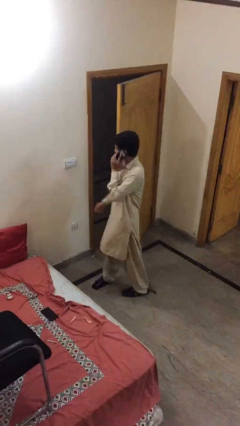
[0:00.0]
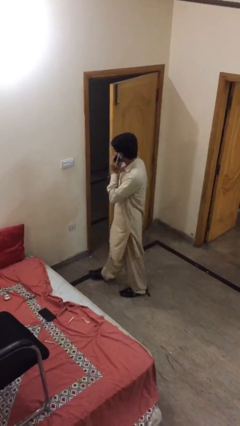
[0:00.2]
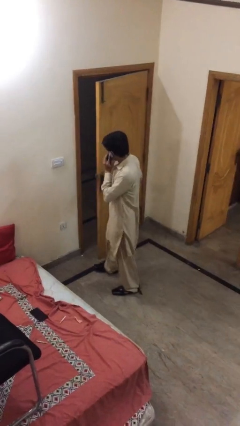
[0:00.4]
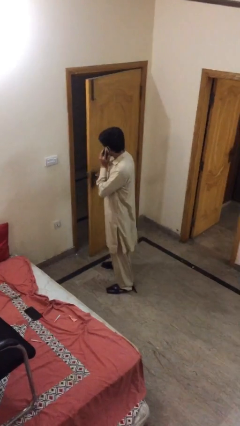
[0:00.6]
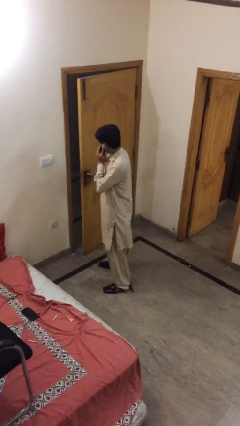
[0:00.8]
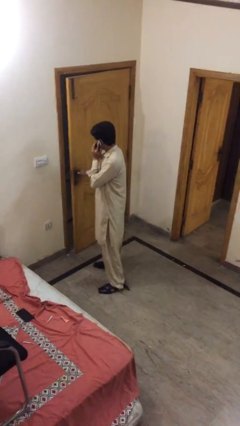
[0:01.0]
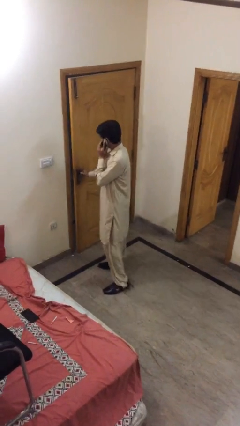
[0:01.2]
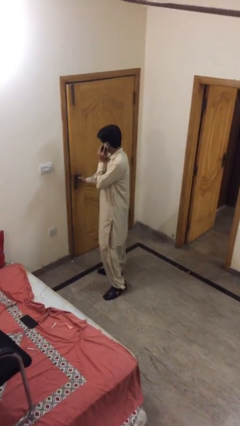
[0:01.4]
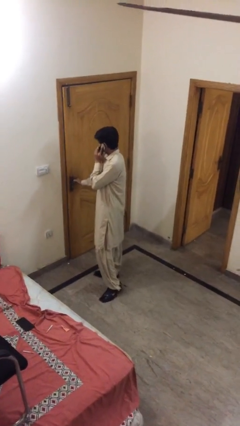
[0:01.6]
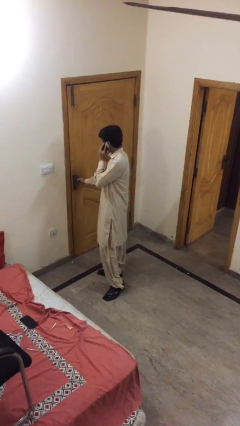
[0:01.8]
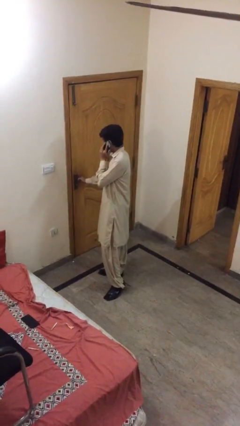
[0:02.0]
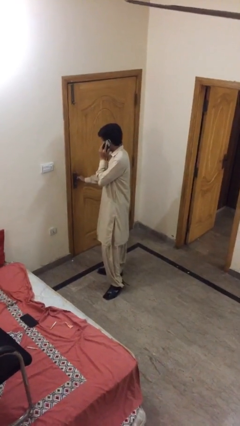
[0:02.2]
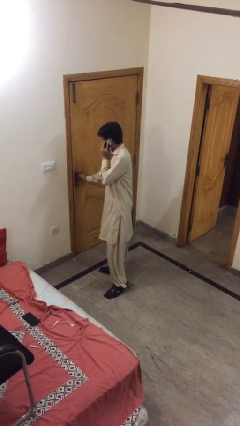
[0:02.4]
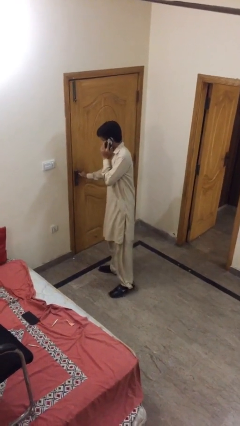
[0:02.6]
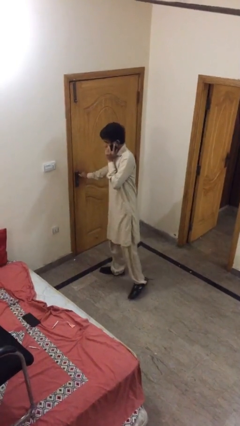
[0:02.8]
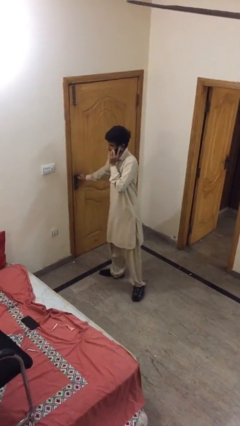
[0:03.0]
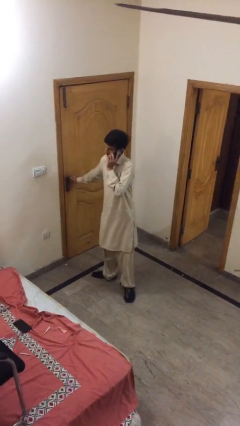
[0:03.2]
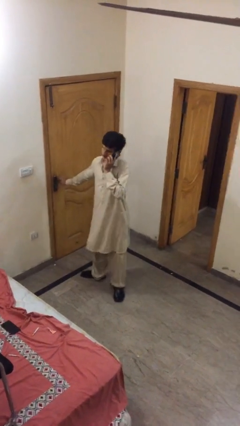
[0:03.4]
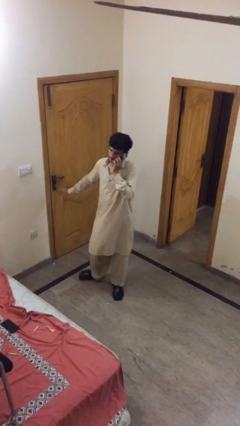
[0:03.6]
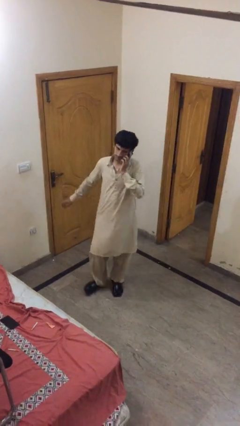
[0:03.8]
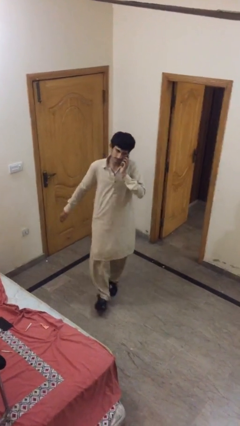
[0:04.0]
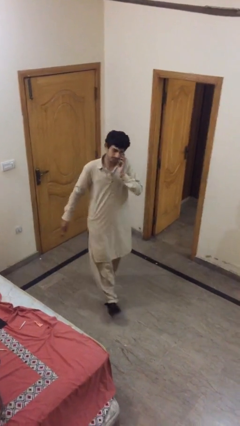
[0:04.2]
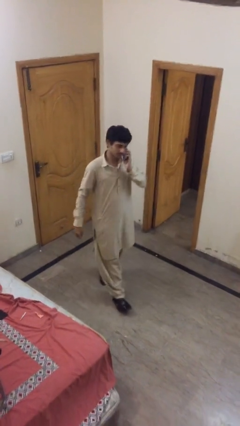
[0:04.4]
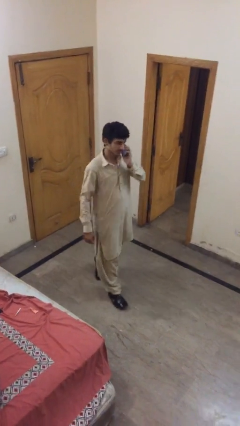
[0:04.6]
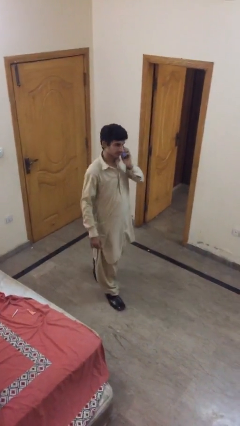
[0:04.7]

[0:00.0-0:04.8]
person closes facility door

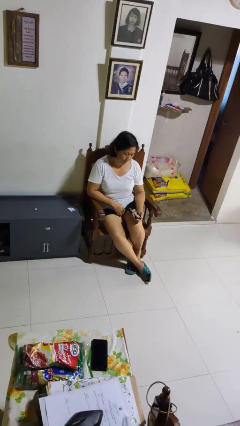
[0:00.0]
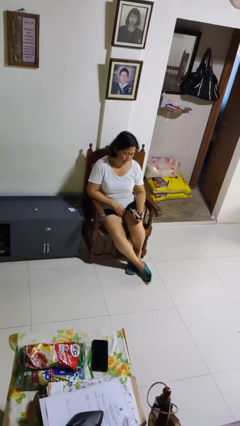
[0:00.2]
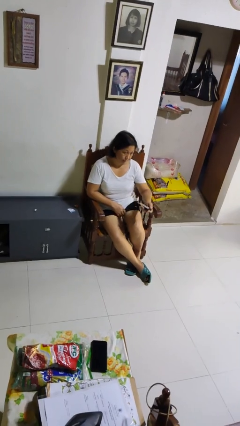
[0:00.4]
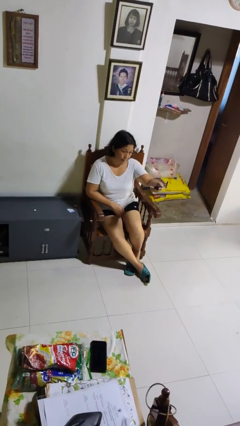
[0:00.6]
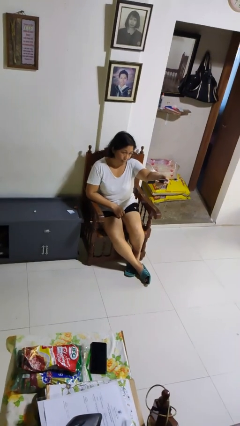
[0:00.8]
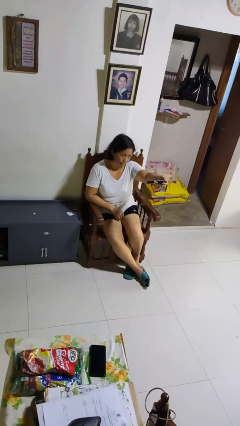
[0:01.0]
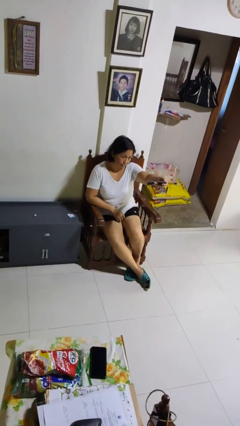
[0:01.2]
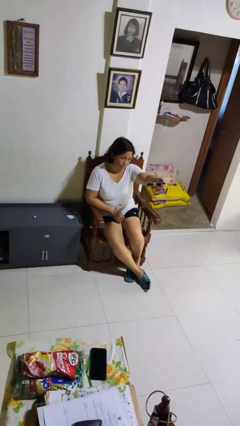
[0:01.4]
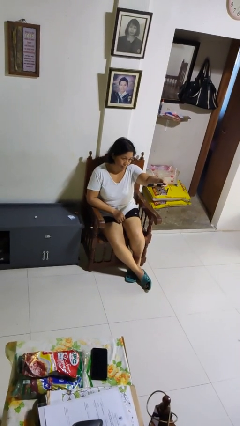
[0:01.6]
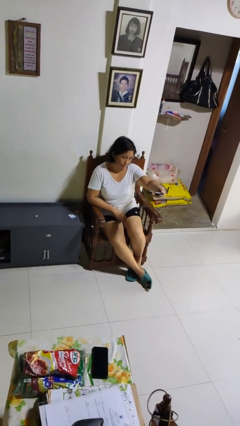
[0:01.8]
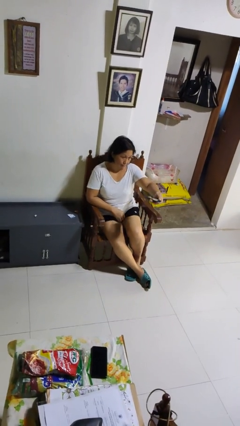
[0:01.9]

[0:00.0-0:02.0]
person uses television remote

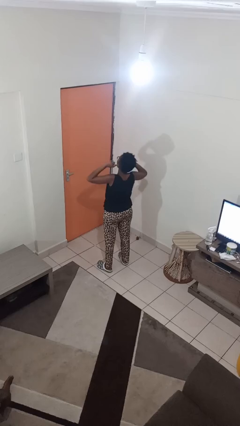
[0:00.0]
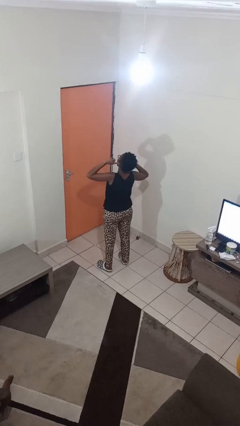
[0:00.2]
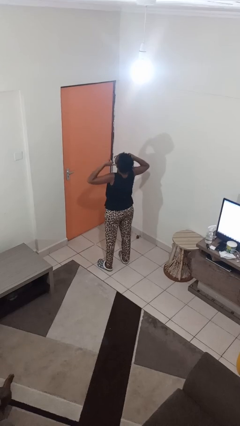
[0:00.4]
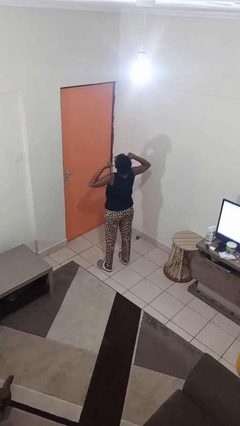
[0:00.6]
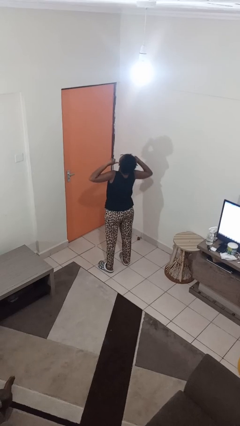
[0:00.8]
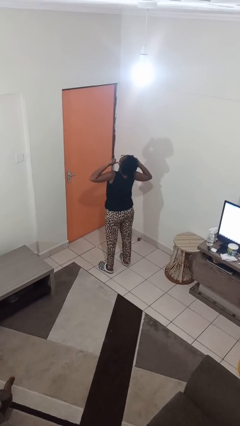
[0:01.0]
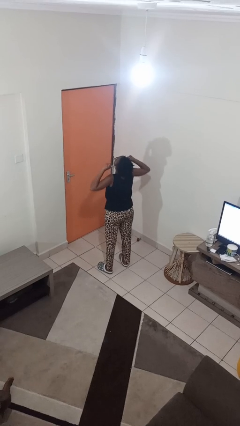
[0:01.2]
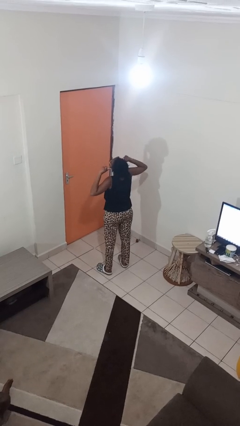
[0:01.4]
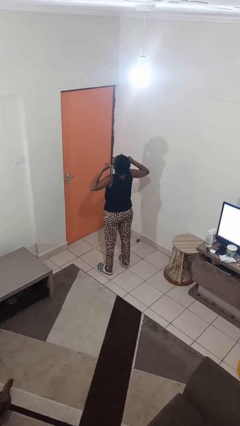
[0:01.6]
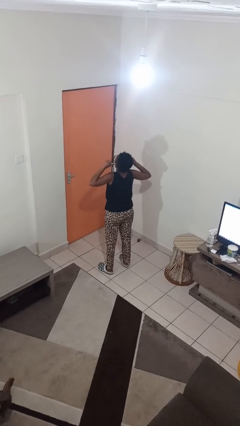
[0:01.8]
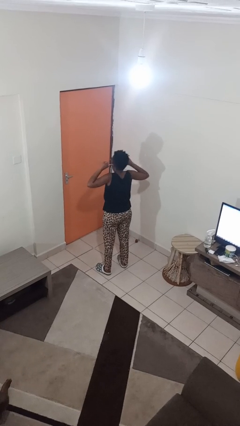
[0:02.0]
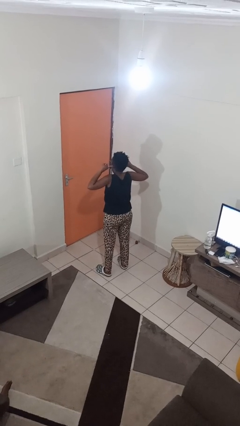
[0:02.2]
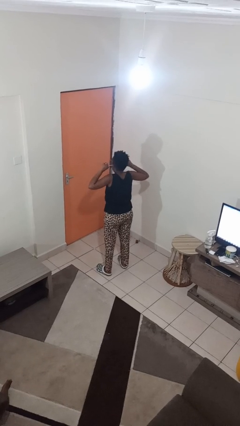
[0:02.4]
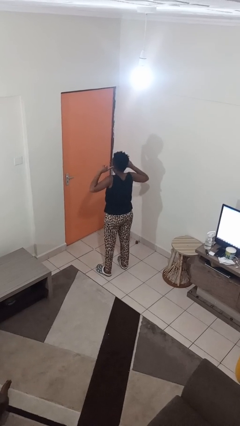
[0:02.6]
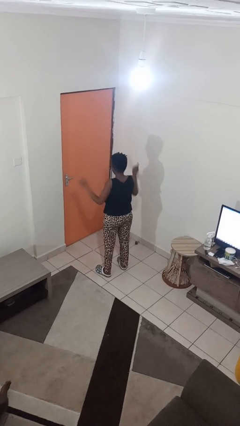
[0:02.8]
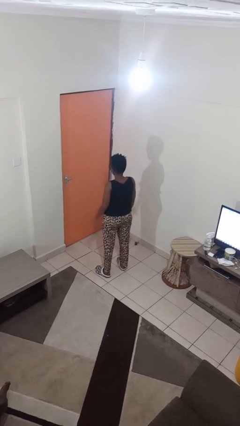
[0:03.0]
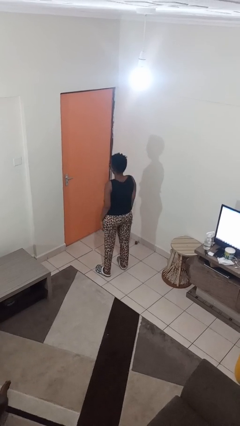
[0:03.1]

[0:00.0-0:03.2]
person puts fingers in ear

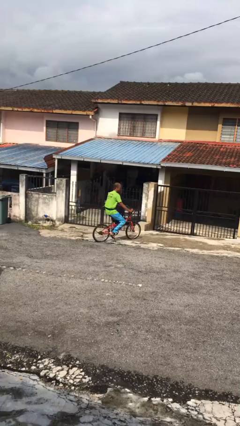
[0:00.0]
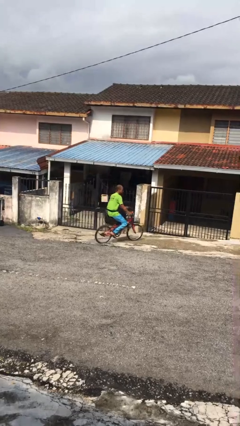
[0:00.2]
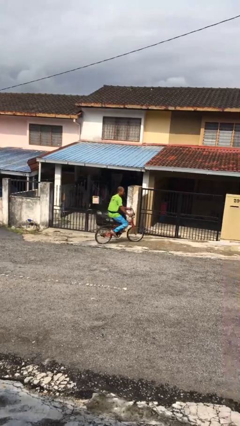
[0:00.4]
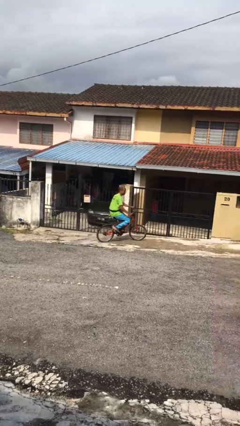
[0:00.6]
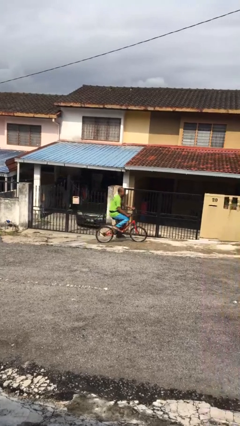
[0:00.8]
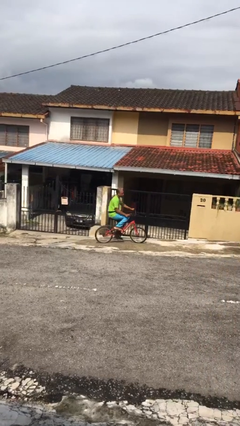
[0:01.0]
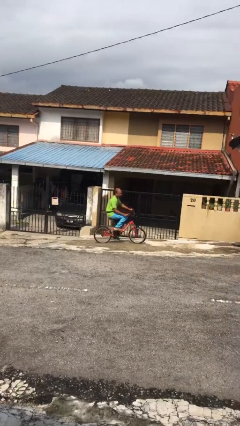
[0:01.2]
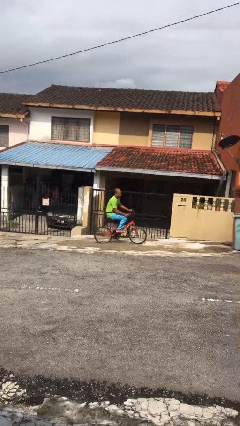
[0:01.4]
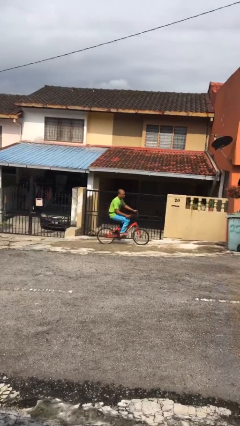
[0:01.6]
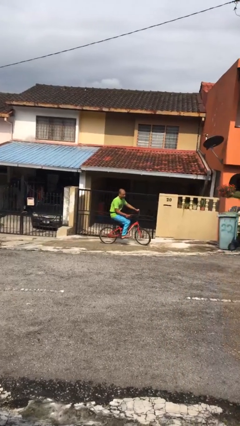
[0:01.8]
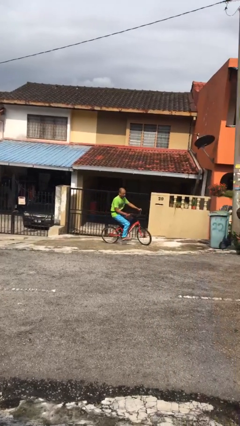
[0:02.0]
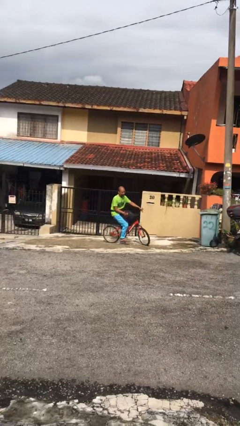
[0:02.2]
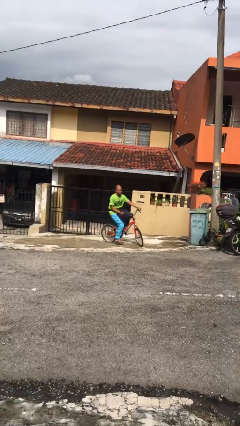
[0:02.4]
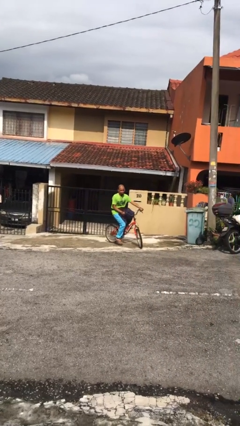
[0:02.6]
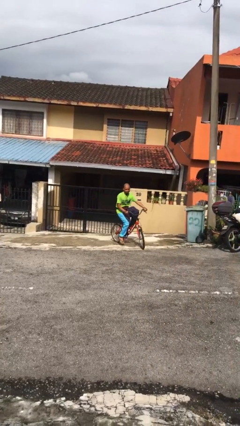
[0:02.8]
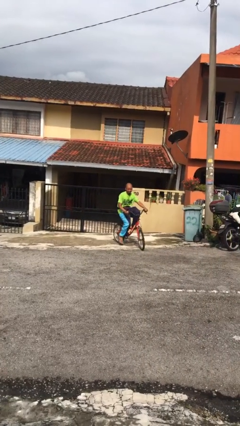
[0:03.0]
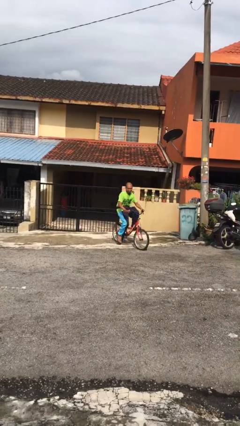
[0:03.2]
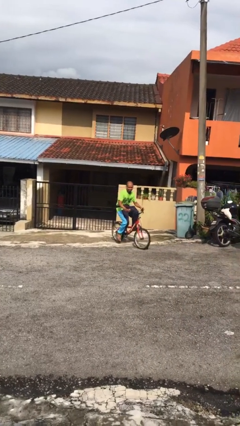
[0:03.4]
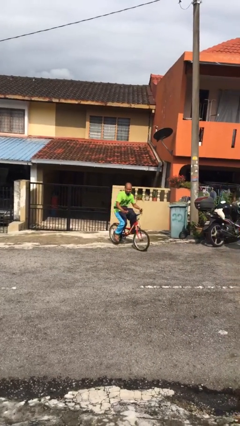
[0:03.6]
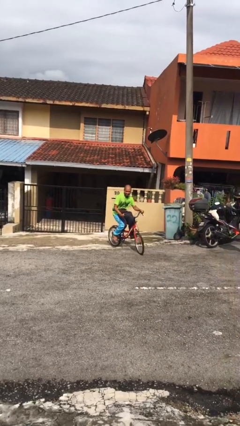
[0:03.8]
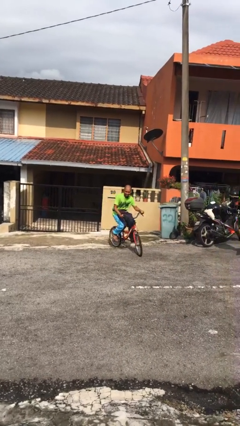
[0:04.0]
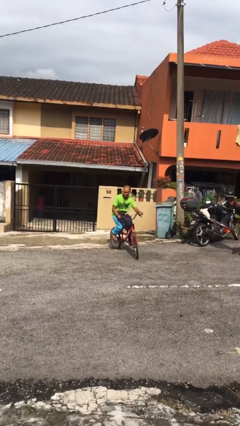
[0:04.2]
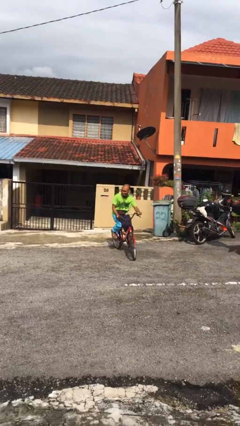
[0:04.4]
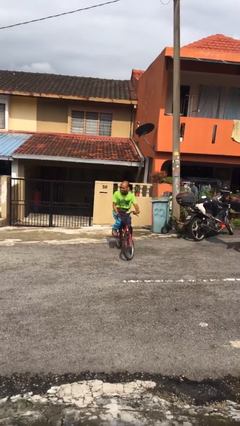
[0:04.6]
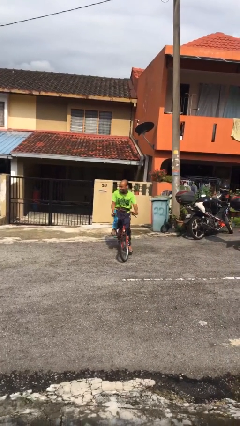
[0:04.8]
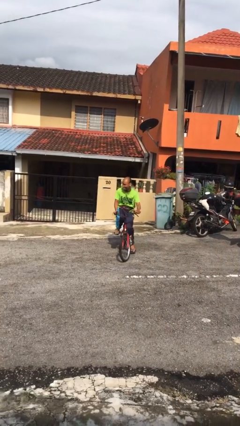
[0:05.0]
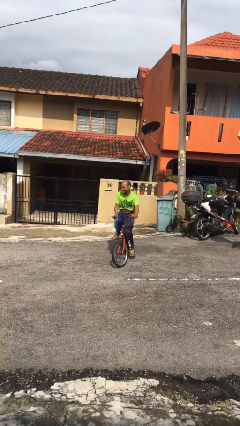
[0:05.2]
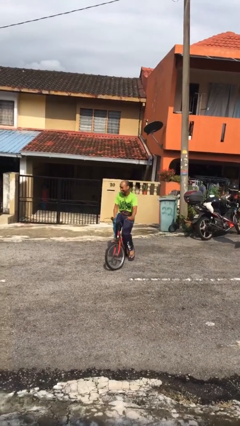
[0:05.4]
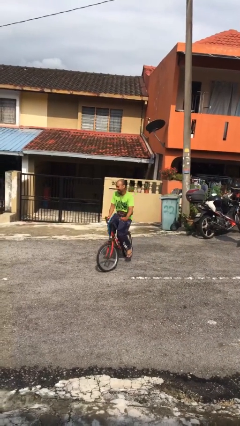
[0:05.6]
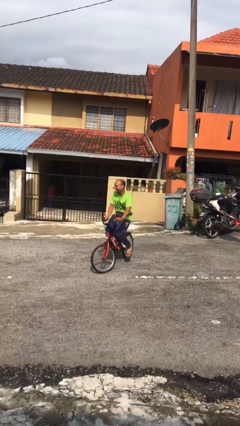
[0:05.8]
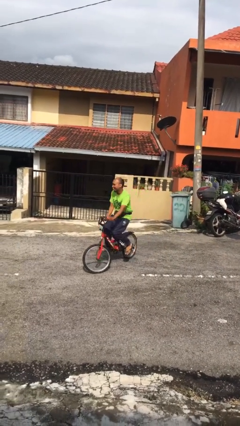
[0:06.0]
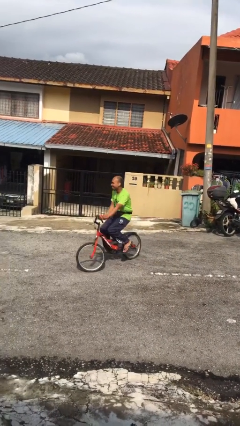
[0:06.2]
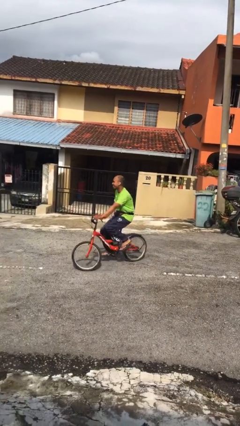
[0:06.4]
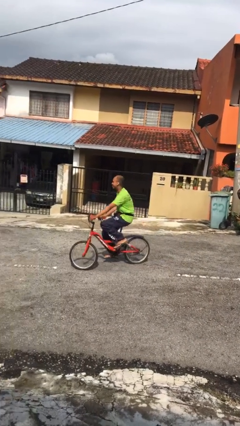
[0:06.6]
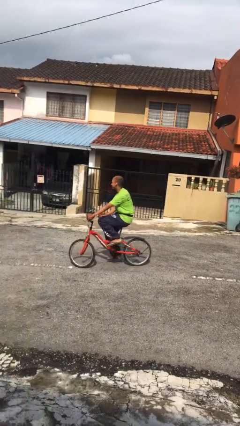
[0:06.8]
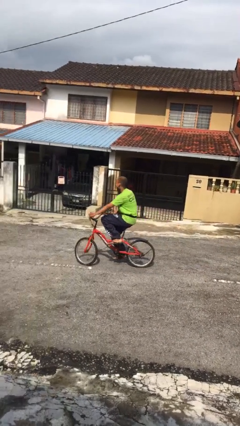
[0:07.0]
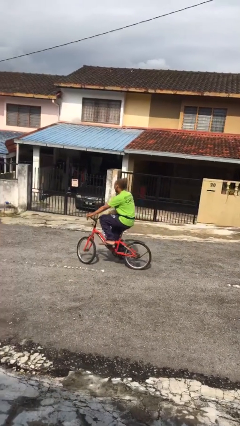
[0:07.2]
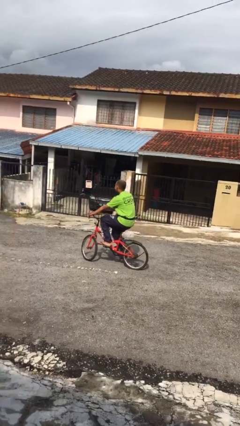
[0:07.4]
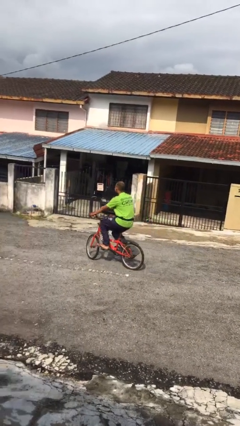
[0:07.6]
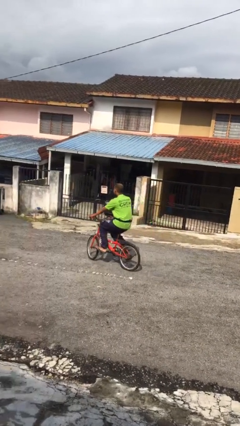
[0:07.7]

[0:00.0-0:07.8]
person rides bicycle
